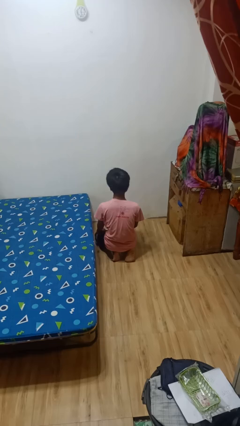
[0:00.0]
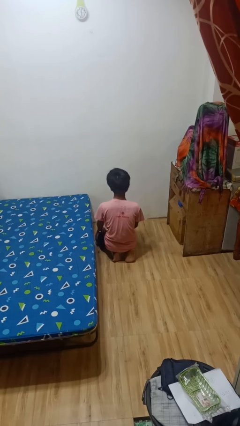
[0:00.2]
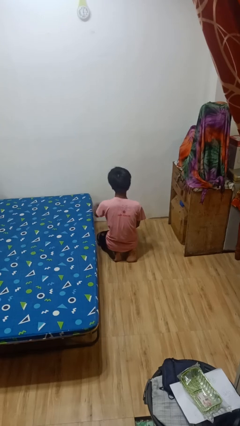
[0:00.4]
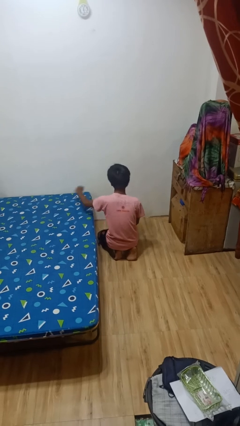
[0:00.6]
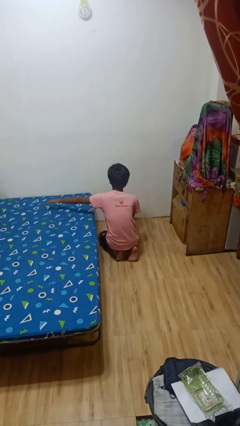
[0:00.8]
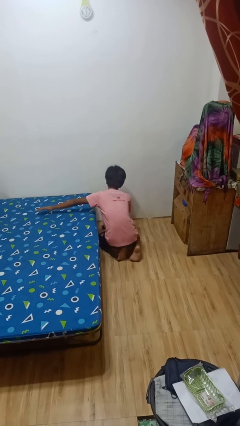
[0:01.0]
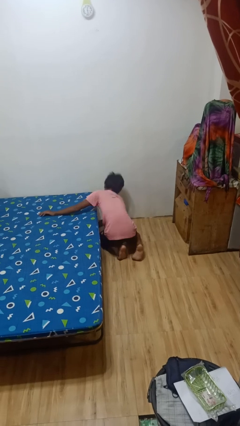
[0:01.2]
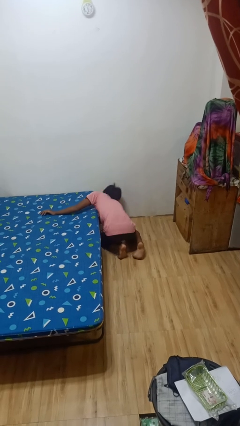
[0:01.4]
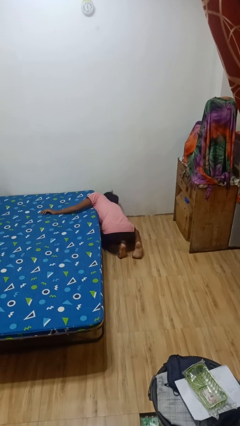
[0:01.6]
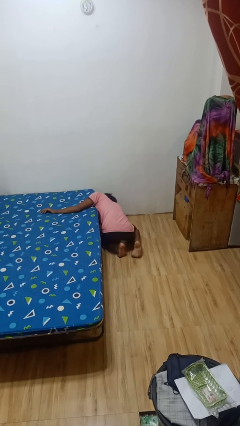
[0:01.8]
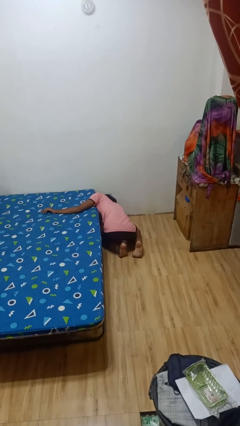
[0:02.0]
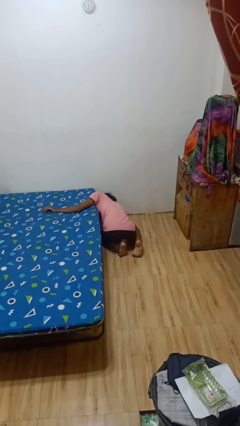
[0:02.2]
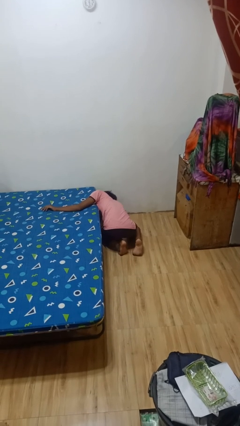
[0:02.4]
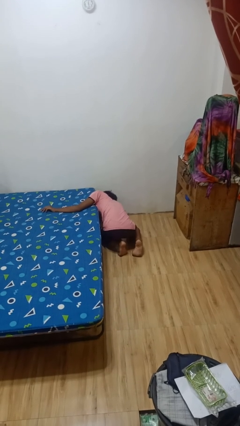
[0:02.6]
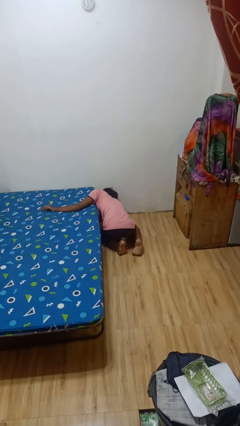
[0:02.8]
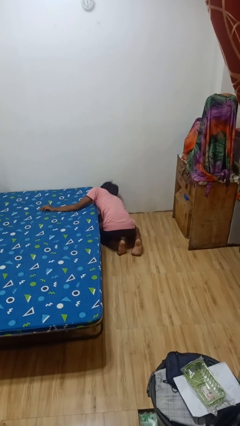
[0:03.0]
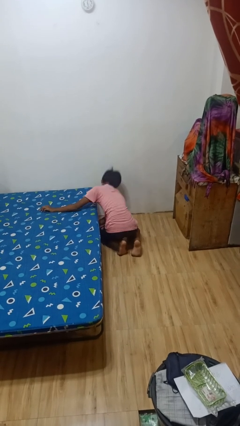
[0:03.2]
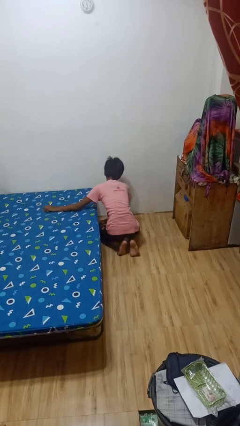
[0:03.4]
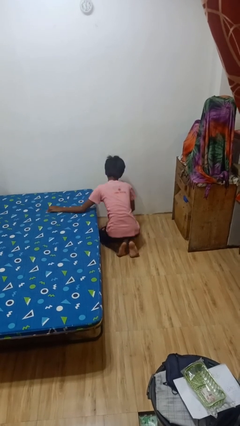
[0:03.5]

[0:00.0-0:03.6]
person searches under bed

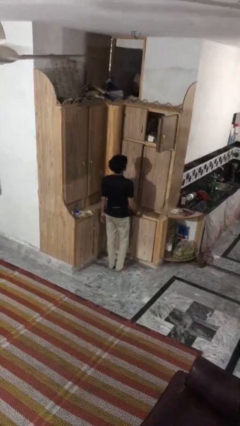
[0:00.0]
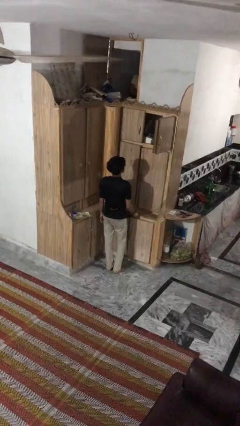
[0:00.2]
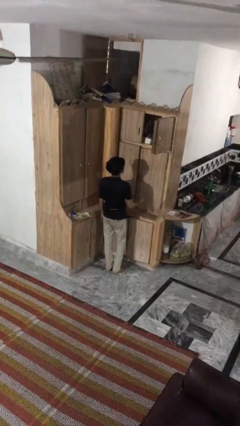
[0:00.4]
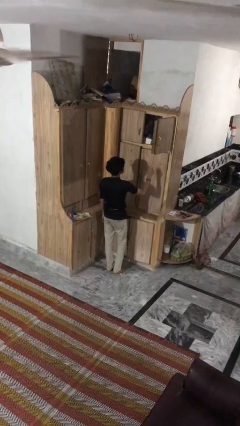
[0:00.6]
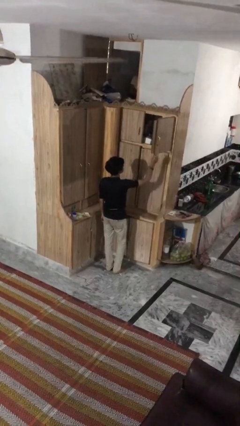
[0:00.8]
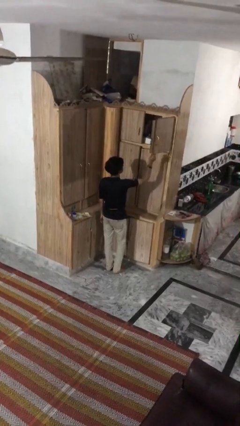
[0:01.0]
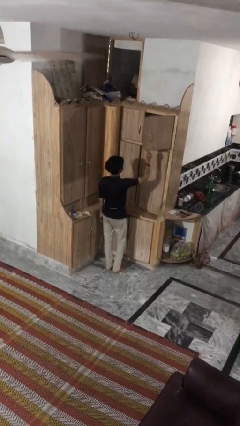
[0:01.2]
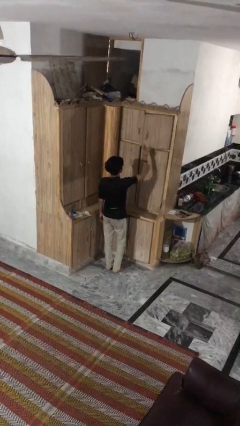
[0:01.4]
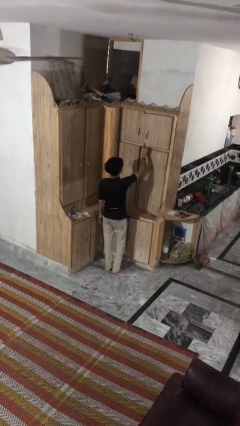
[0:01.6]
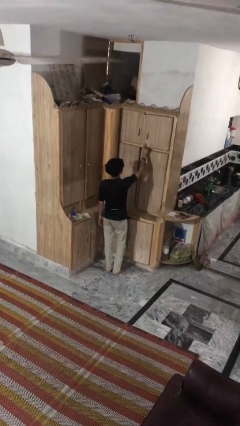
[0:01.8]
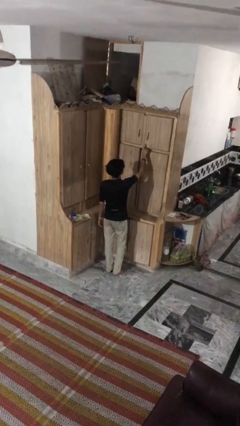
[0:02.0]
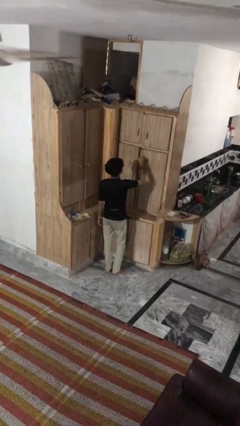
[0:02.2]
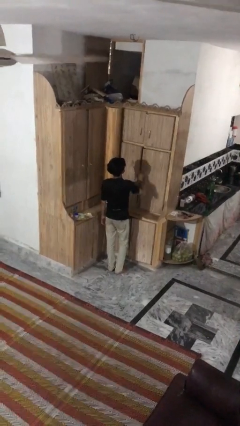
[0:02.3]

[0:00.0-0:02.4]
person closes cabinet

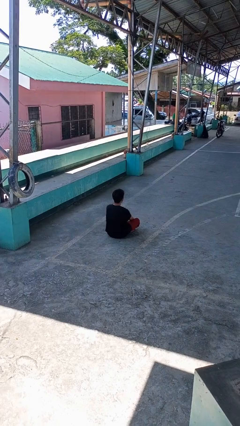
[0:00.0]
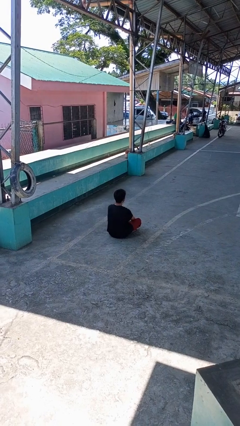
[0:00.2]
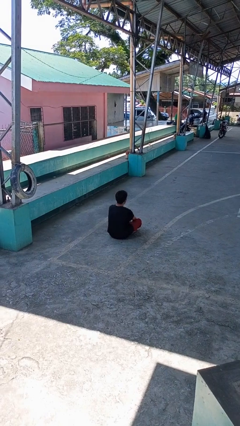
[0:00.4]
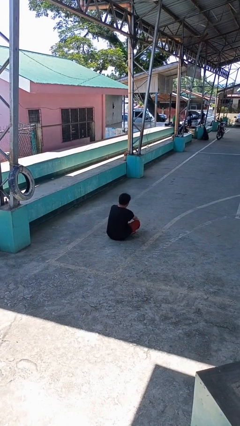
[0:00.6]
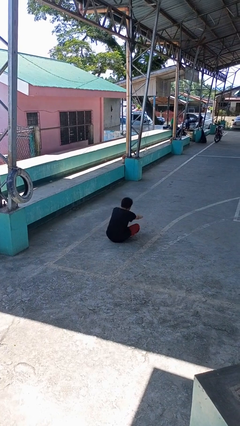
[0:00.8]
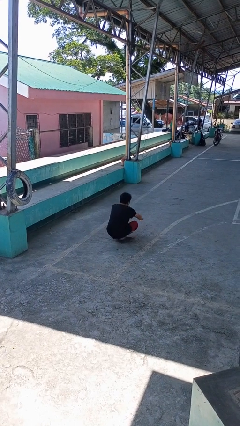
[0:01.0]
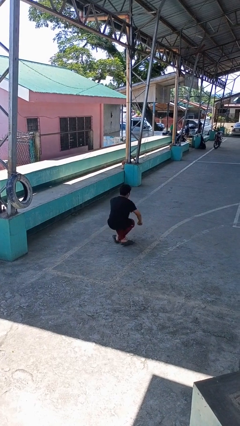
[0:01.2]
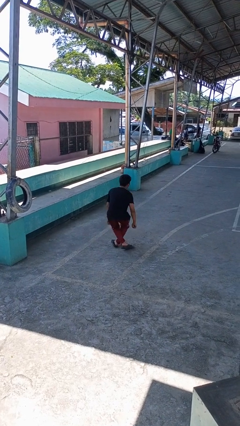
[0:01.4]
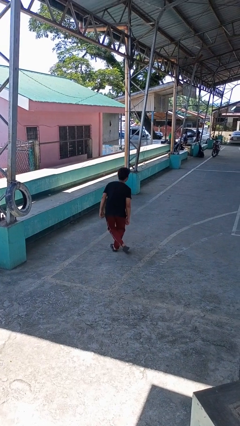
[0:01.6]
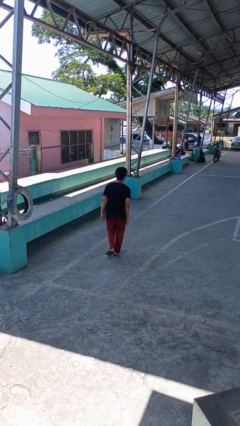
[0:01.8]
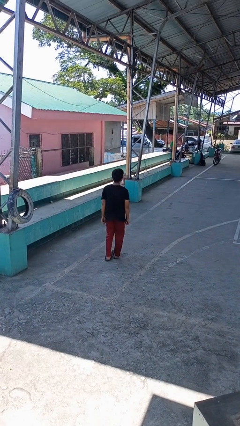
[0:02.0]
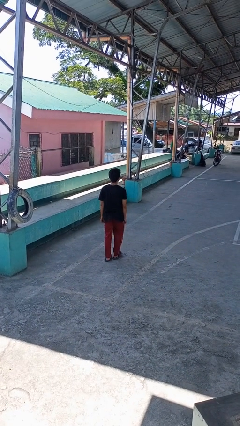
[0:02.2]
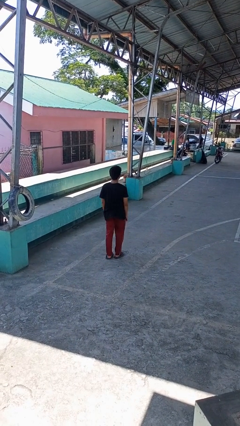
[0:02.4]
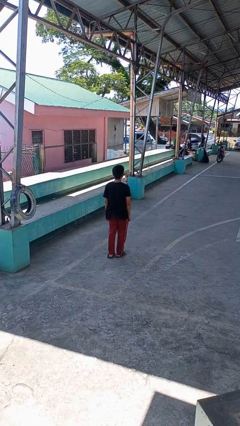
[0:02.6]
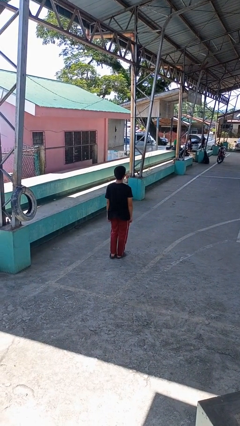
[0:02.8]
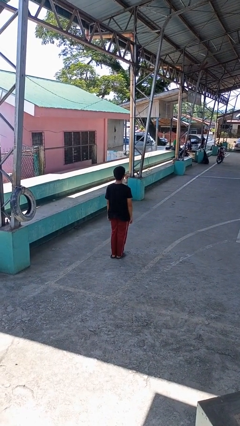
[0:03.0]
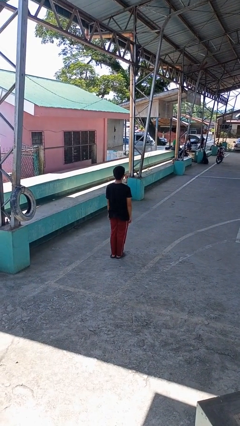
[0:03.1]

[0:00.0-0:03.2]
person stands up from floor

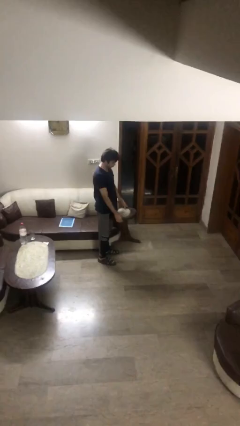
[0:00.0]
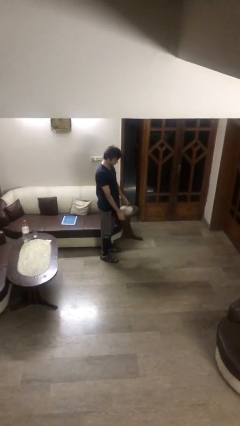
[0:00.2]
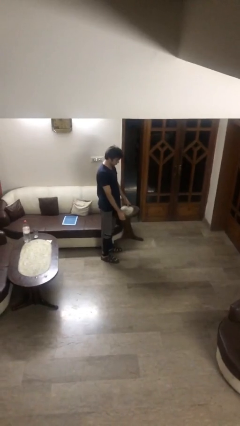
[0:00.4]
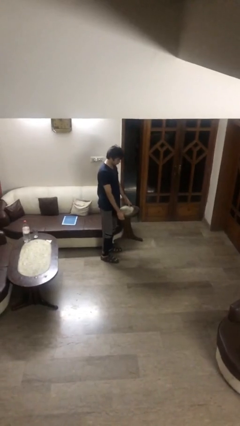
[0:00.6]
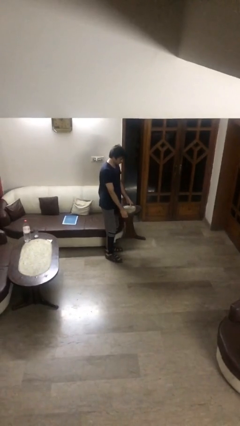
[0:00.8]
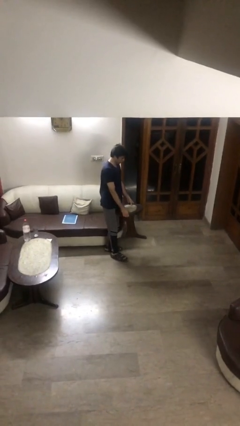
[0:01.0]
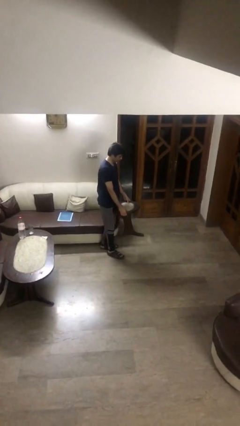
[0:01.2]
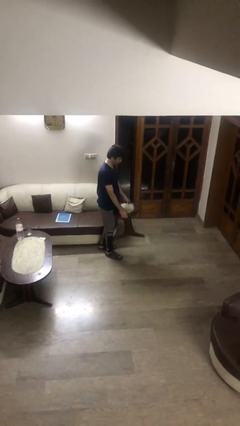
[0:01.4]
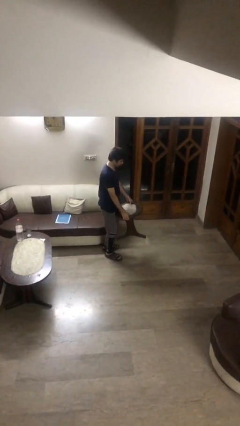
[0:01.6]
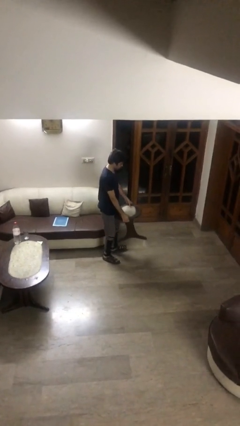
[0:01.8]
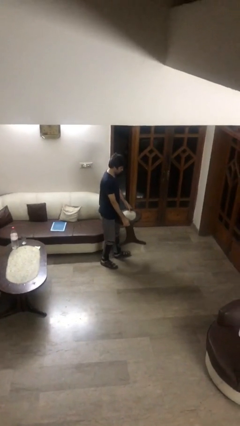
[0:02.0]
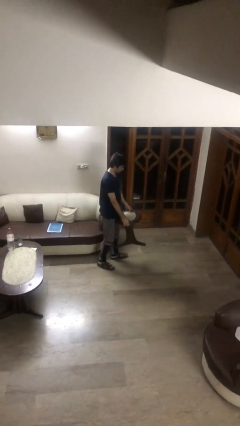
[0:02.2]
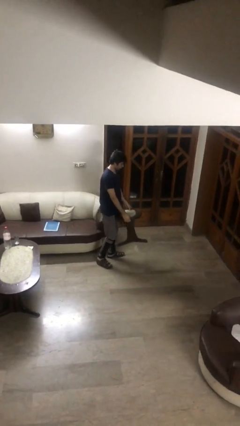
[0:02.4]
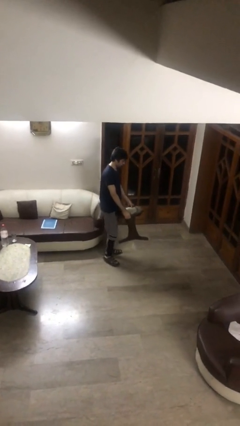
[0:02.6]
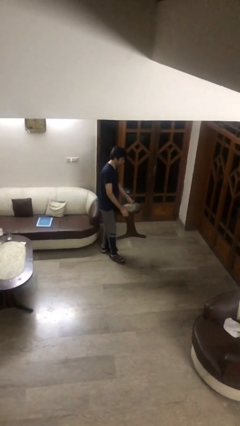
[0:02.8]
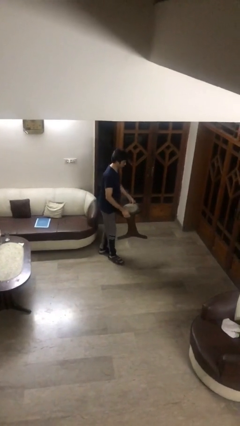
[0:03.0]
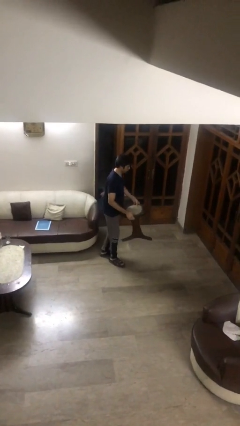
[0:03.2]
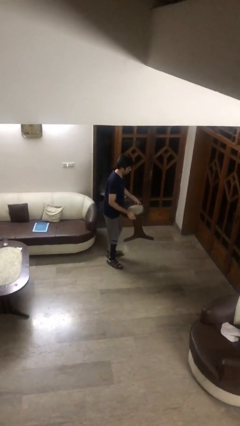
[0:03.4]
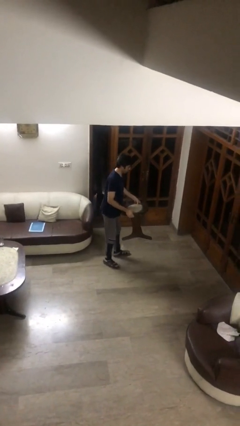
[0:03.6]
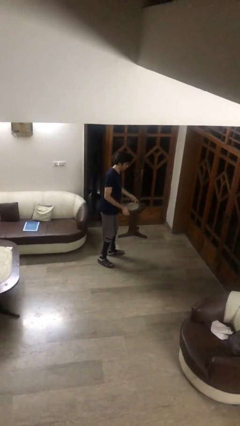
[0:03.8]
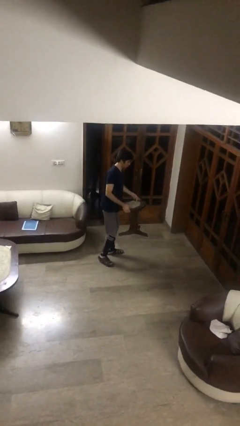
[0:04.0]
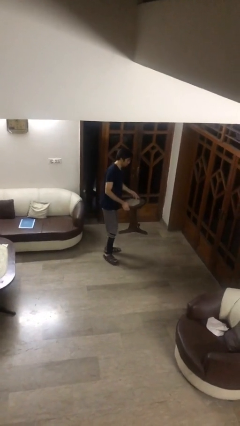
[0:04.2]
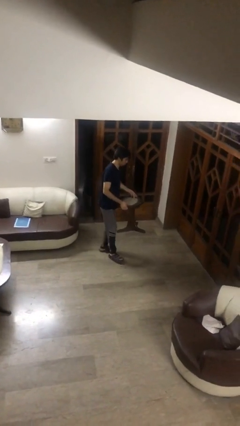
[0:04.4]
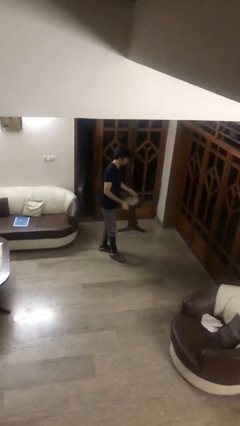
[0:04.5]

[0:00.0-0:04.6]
person carries heavy object

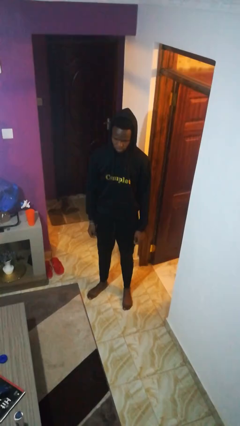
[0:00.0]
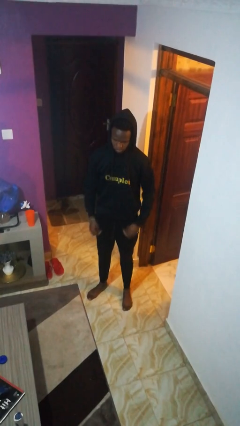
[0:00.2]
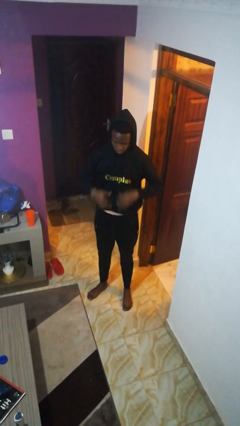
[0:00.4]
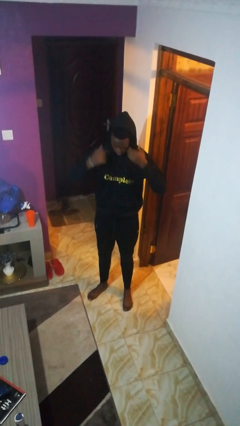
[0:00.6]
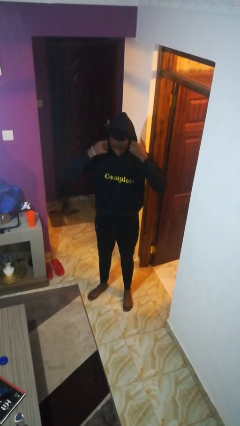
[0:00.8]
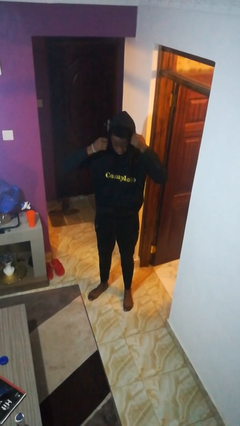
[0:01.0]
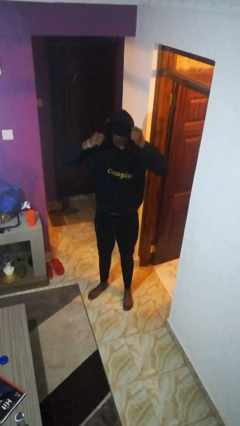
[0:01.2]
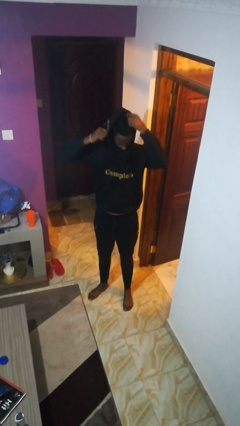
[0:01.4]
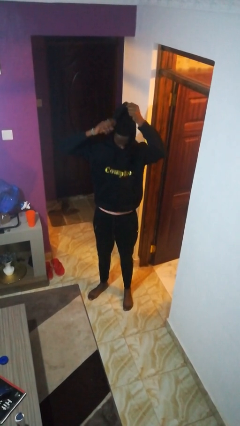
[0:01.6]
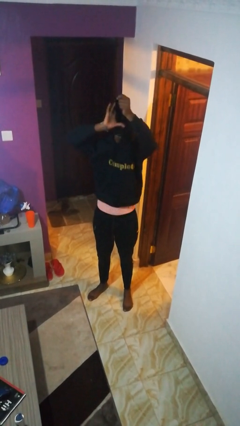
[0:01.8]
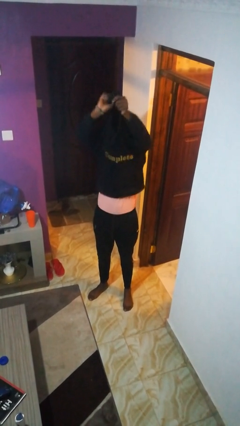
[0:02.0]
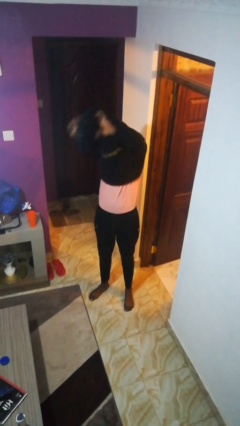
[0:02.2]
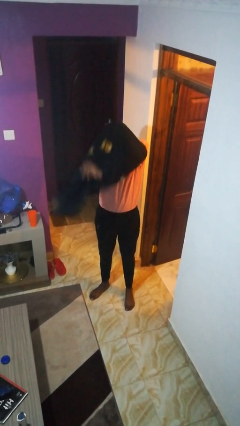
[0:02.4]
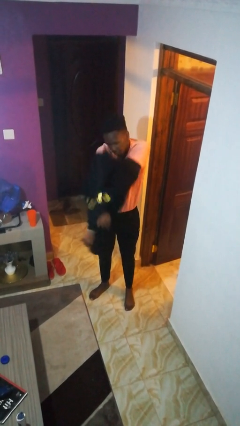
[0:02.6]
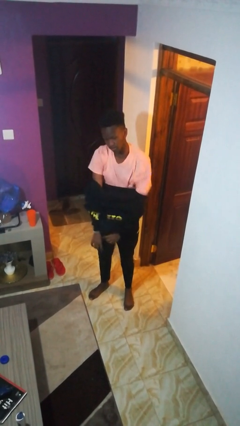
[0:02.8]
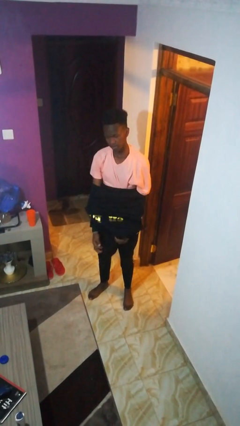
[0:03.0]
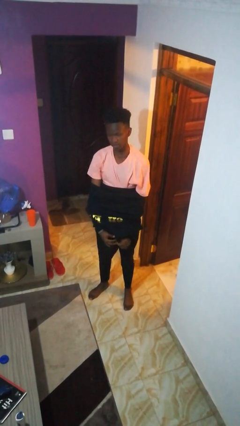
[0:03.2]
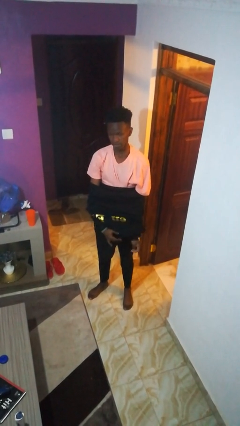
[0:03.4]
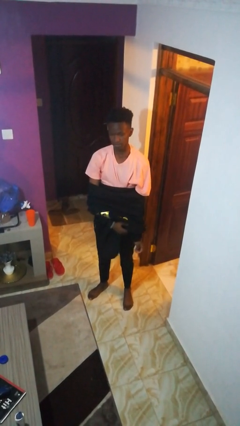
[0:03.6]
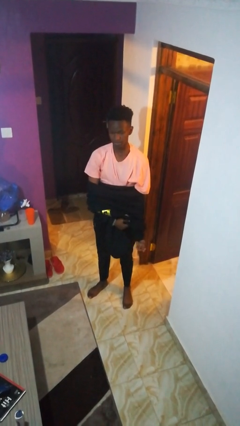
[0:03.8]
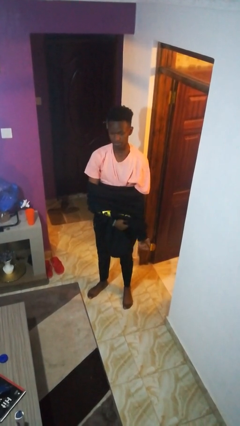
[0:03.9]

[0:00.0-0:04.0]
person takes off hoodie
